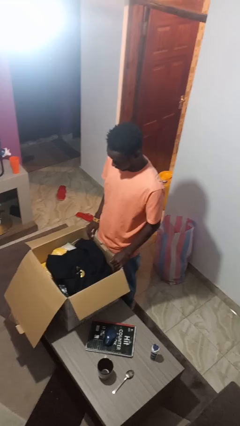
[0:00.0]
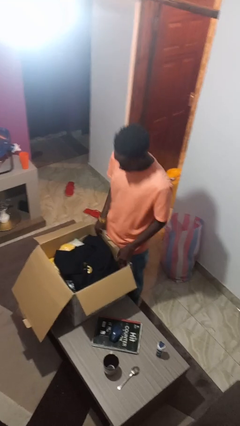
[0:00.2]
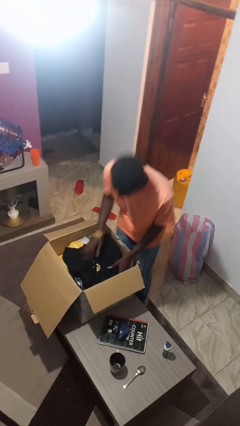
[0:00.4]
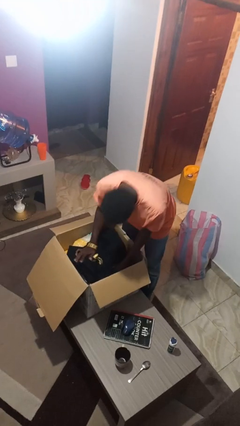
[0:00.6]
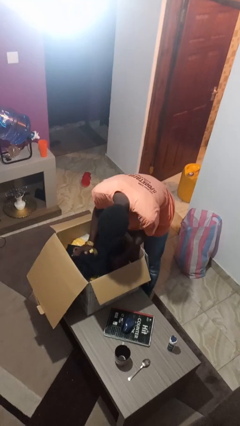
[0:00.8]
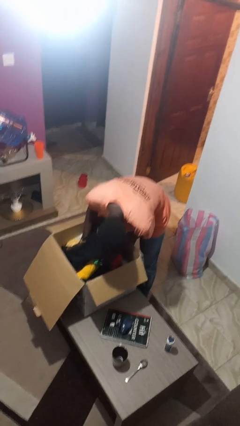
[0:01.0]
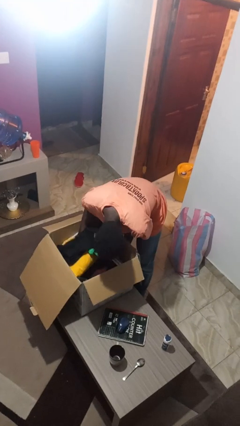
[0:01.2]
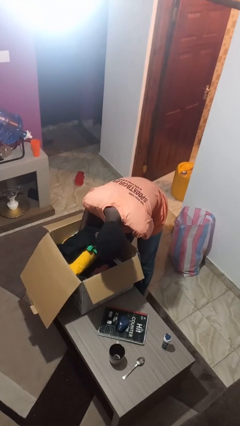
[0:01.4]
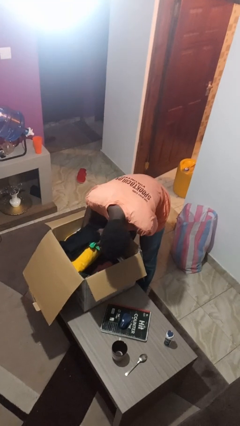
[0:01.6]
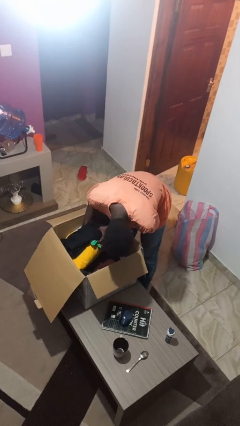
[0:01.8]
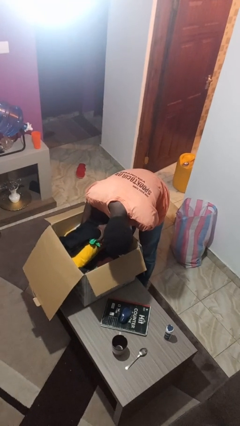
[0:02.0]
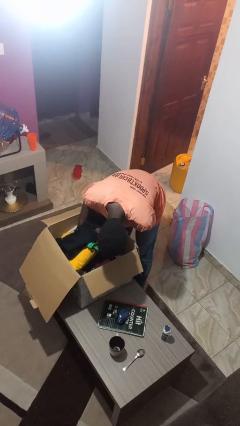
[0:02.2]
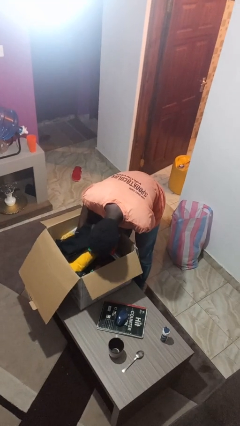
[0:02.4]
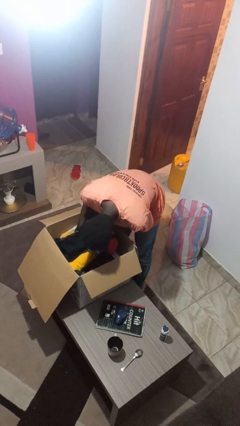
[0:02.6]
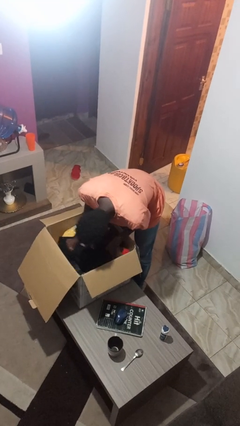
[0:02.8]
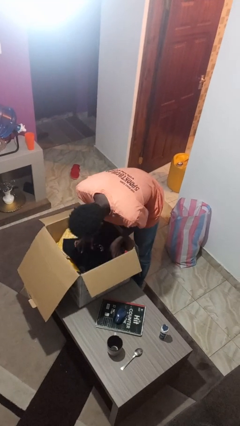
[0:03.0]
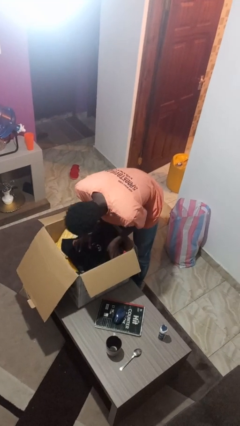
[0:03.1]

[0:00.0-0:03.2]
person searches in box

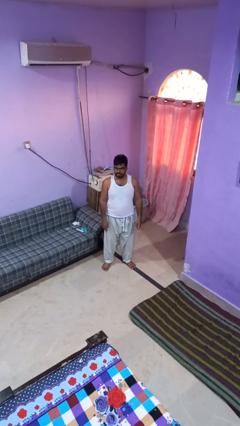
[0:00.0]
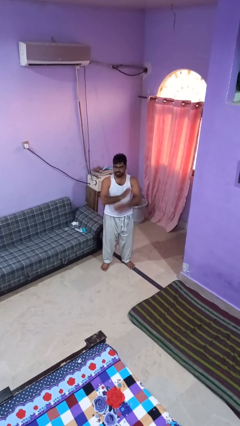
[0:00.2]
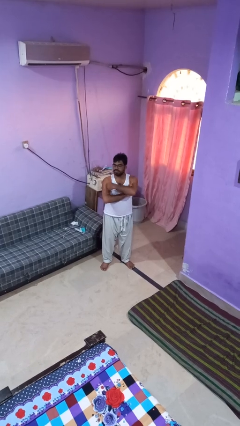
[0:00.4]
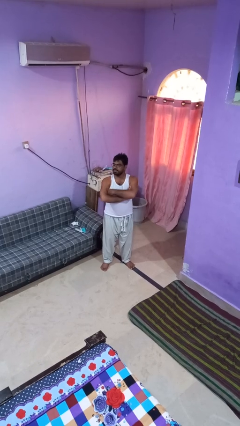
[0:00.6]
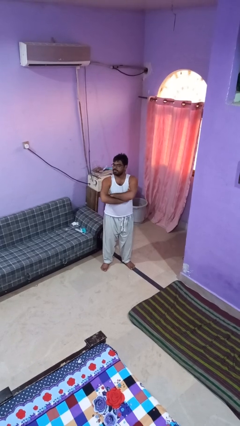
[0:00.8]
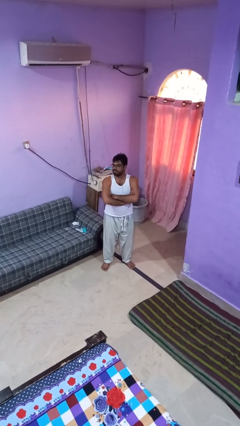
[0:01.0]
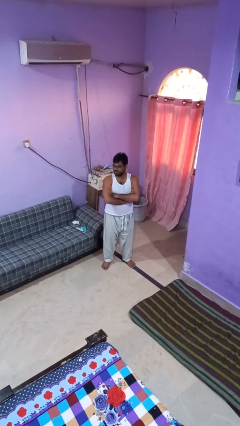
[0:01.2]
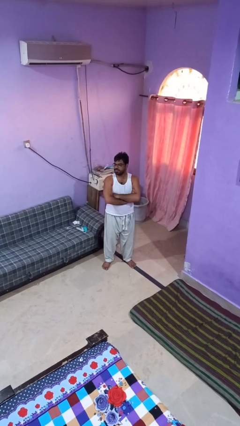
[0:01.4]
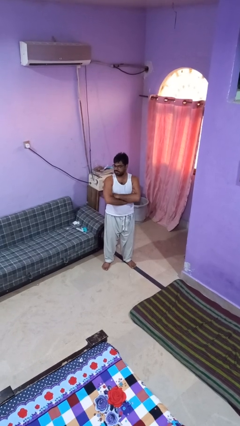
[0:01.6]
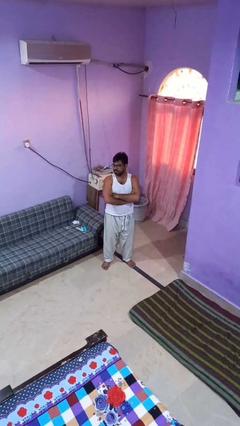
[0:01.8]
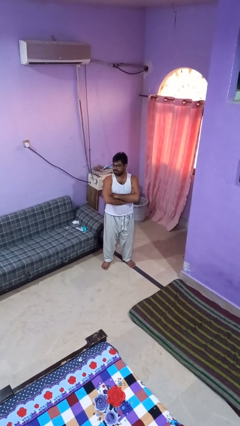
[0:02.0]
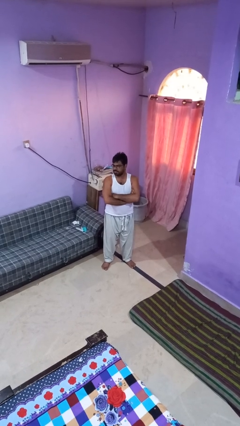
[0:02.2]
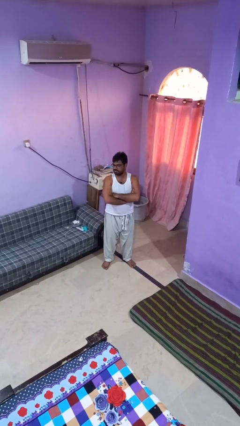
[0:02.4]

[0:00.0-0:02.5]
person crosses arms

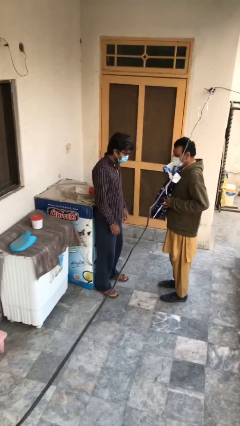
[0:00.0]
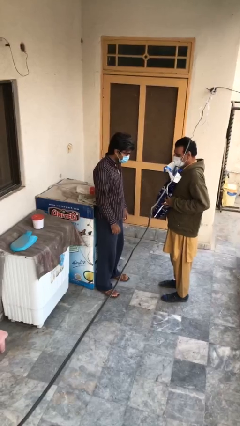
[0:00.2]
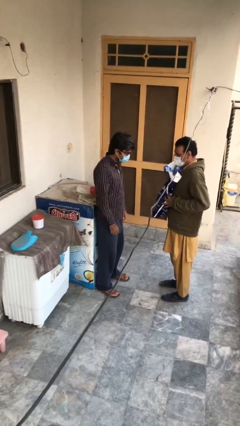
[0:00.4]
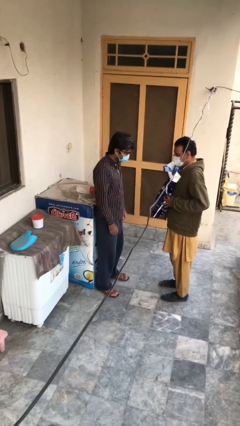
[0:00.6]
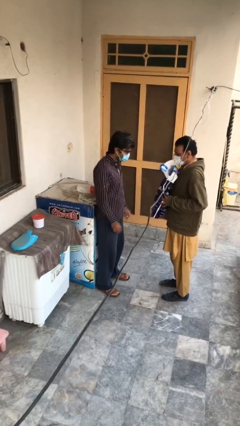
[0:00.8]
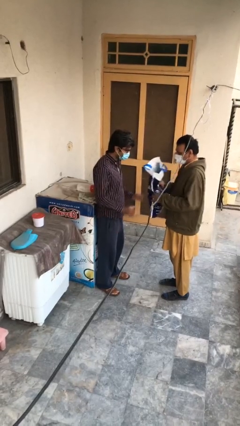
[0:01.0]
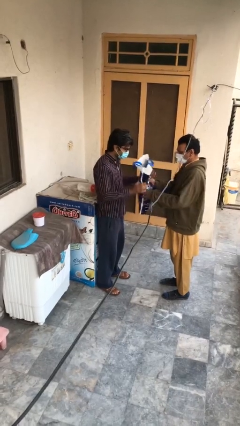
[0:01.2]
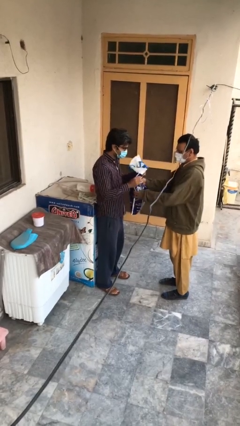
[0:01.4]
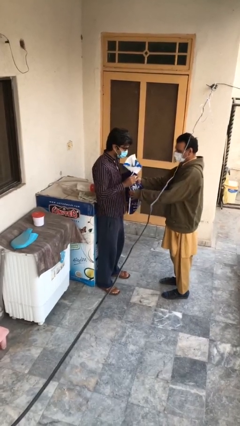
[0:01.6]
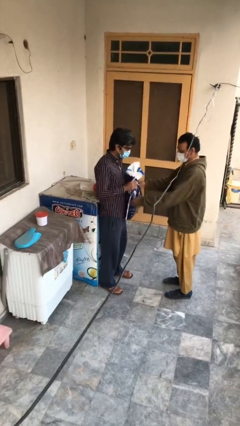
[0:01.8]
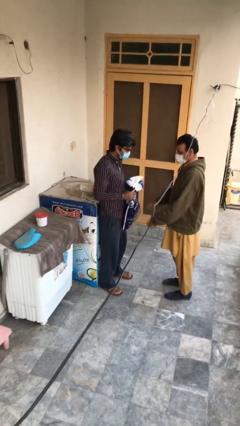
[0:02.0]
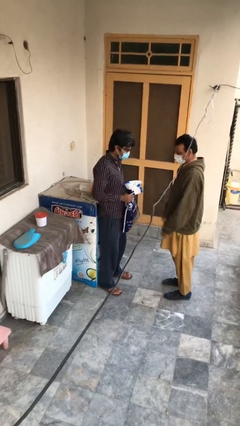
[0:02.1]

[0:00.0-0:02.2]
person transfers object to person

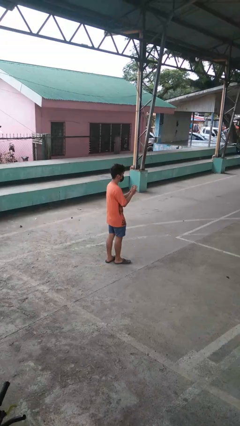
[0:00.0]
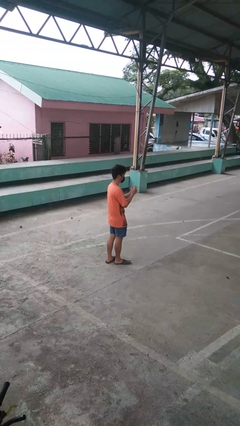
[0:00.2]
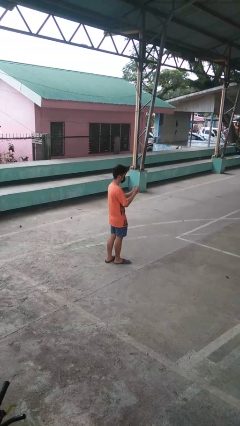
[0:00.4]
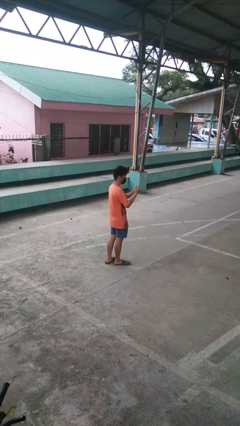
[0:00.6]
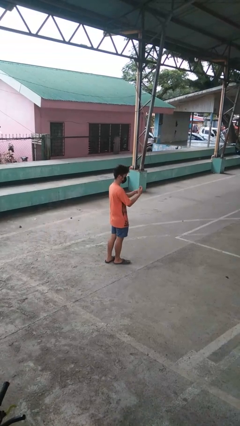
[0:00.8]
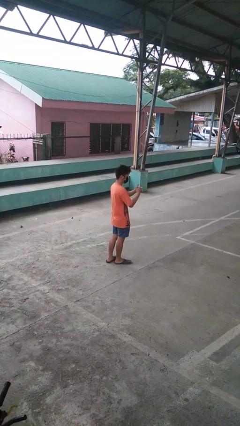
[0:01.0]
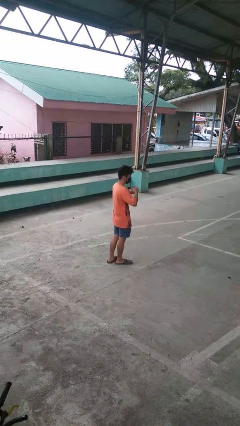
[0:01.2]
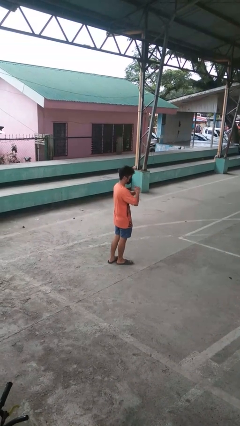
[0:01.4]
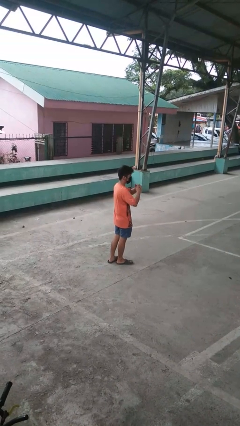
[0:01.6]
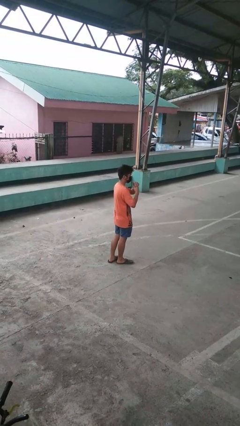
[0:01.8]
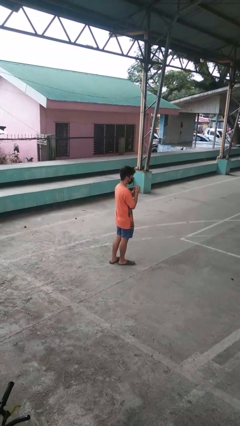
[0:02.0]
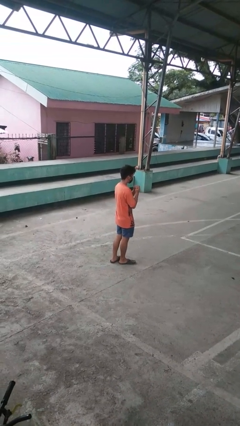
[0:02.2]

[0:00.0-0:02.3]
person cracks knuckles

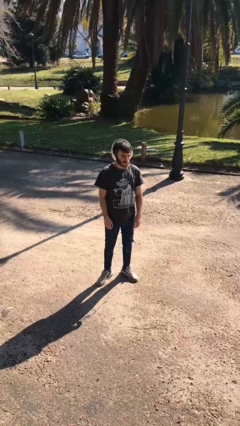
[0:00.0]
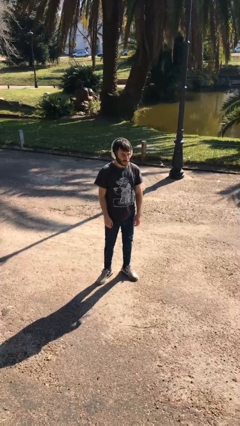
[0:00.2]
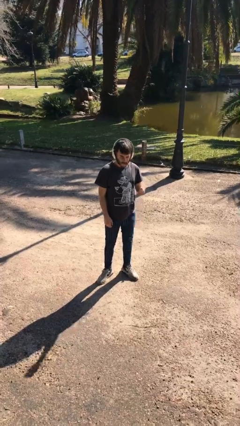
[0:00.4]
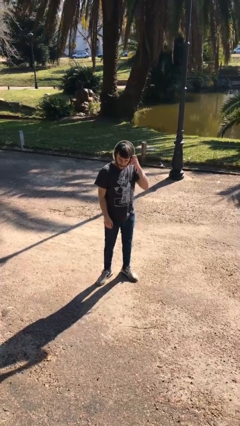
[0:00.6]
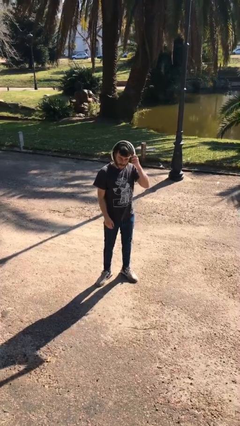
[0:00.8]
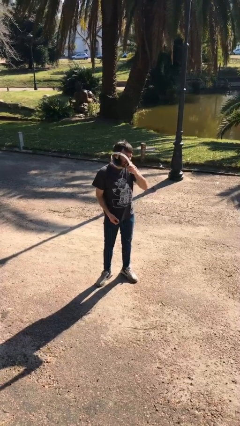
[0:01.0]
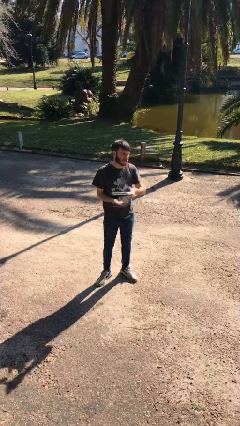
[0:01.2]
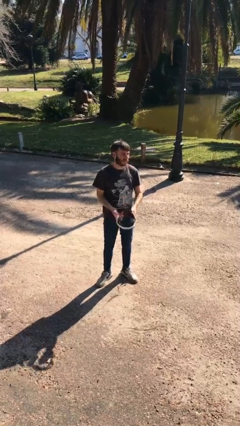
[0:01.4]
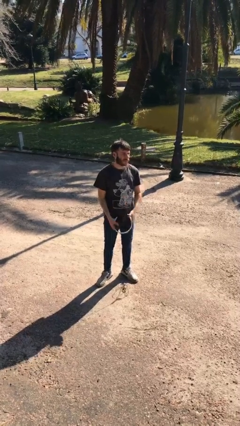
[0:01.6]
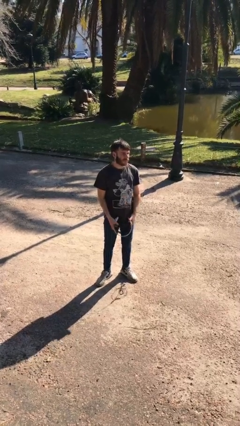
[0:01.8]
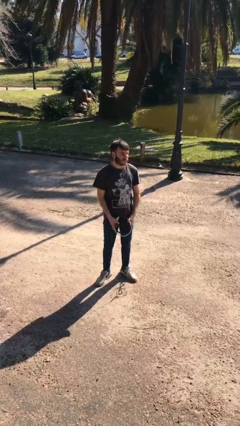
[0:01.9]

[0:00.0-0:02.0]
person takes off headphones

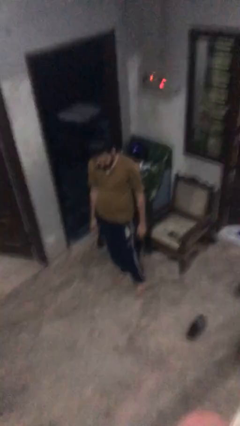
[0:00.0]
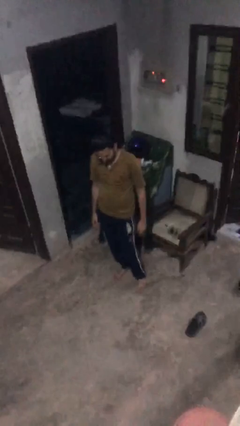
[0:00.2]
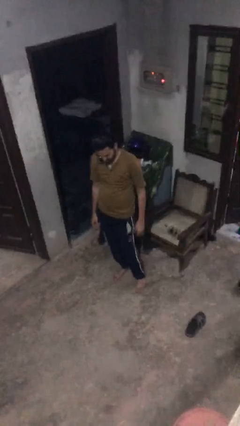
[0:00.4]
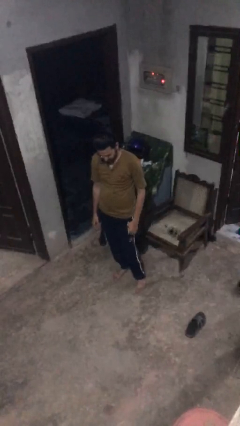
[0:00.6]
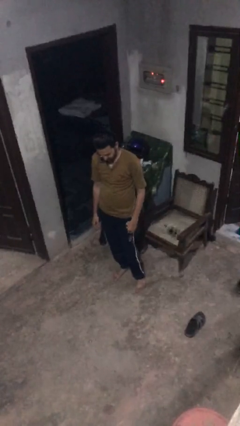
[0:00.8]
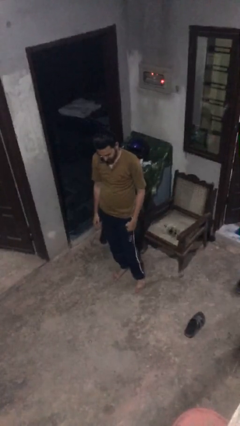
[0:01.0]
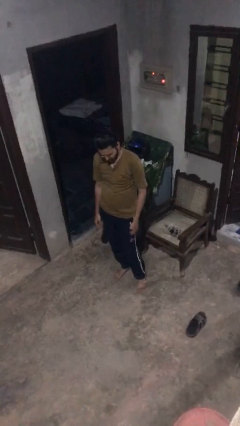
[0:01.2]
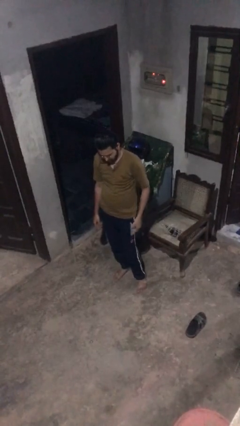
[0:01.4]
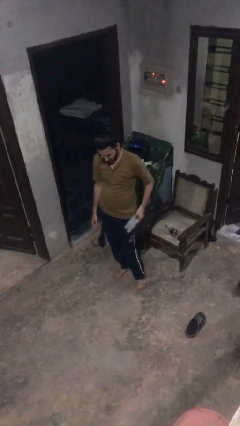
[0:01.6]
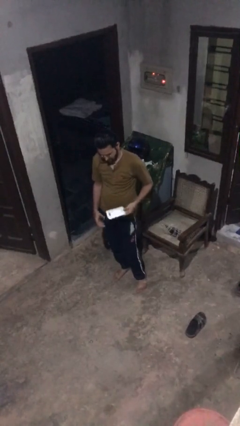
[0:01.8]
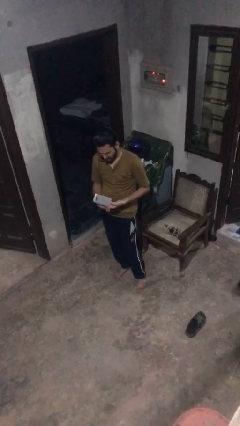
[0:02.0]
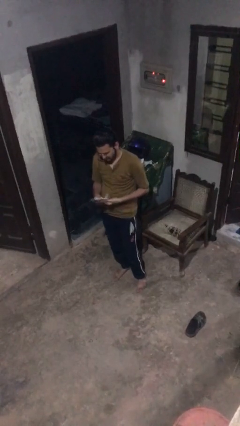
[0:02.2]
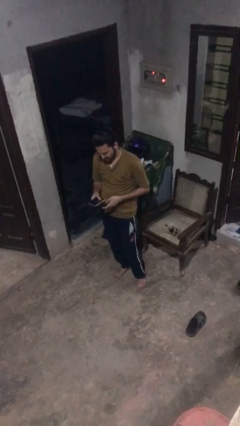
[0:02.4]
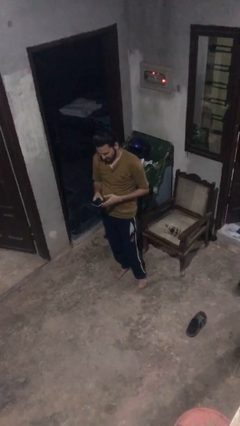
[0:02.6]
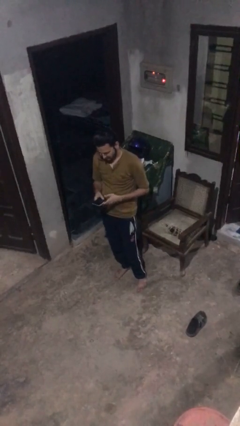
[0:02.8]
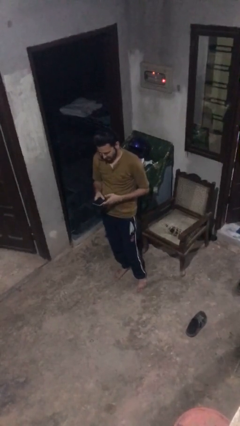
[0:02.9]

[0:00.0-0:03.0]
person takes phone from pocket

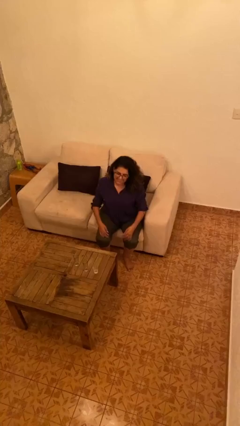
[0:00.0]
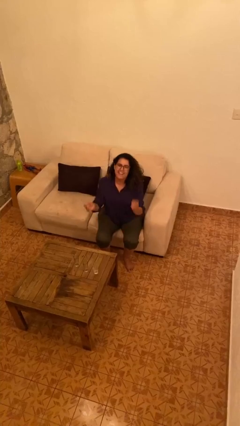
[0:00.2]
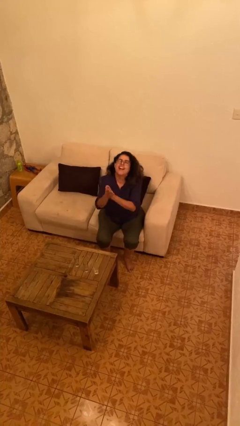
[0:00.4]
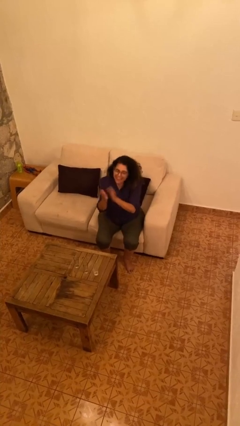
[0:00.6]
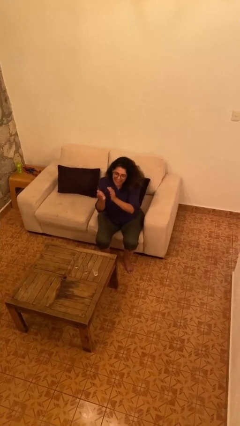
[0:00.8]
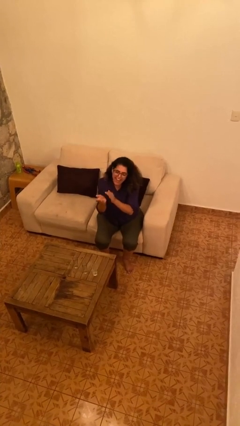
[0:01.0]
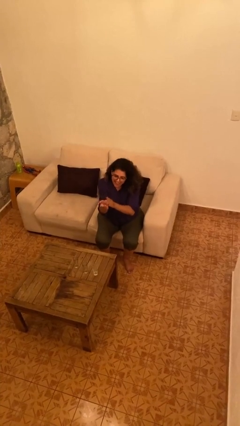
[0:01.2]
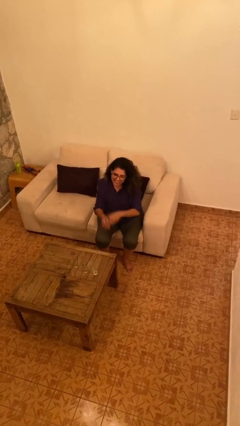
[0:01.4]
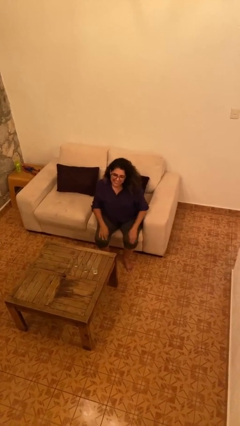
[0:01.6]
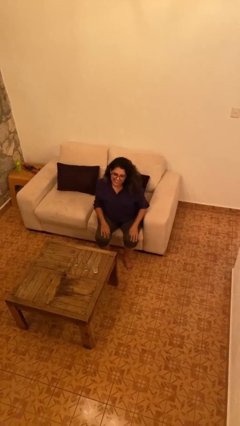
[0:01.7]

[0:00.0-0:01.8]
person claps hands

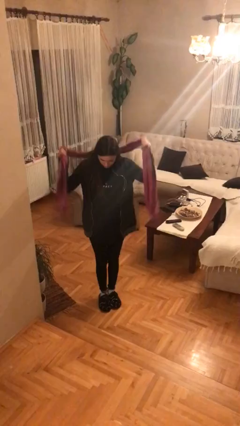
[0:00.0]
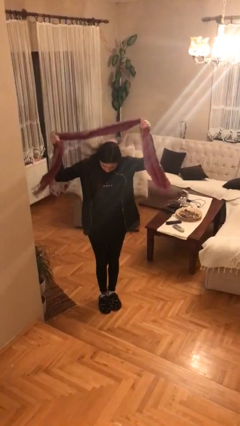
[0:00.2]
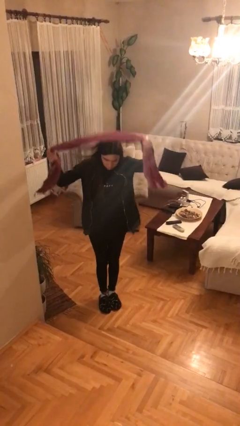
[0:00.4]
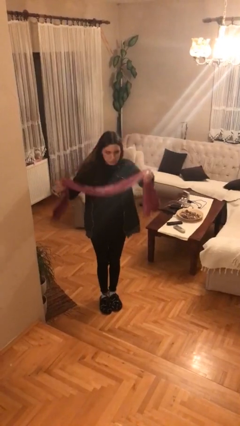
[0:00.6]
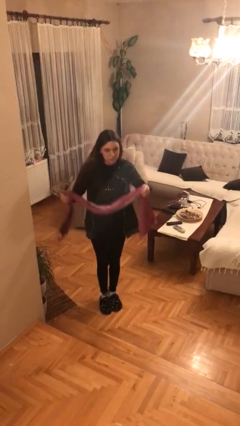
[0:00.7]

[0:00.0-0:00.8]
person takes off scarf
